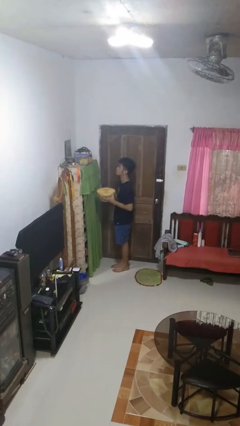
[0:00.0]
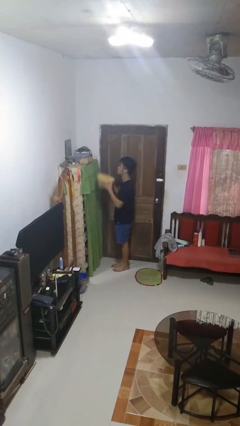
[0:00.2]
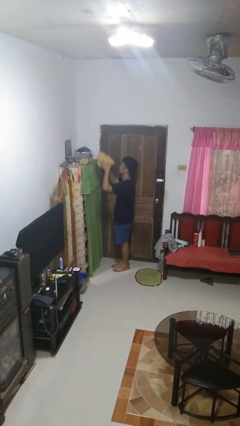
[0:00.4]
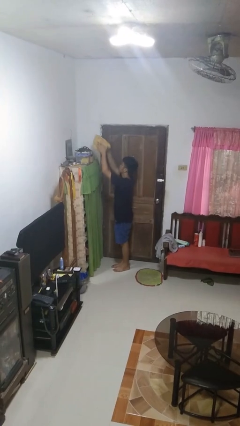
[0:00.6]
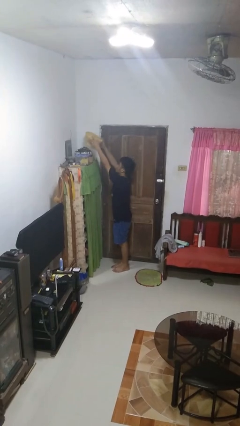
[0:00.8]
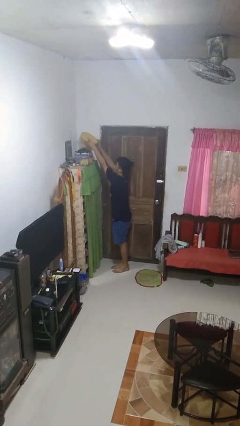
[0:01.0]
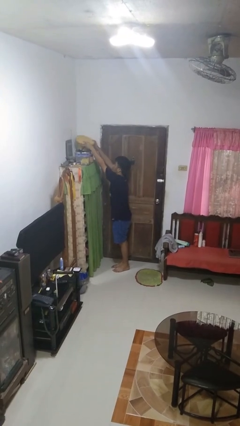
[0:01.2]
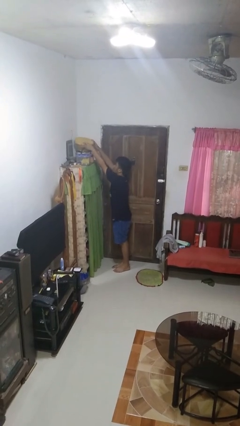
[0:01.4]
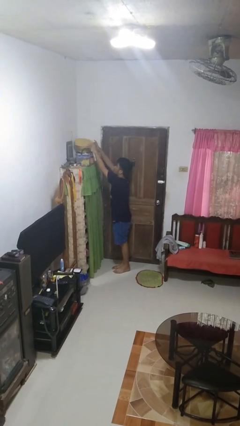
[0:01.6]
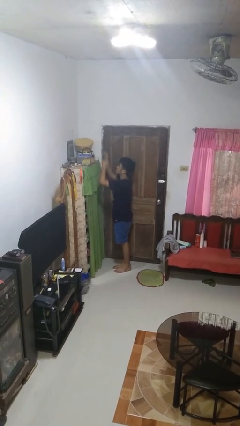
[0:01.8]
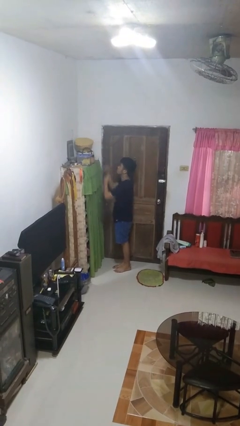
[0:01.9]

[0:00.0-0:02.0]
person puts down object on shelf

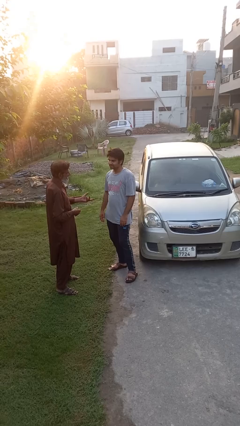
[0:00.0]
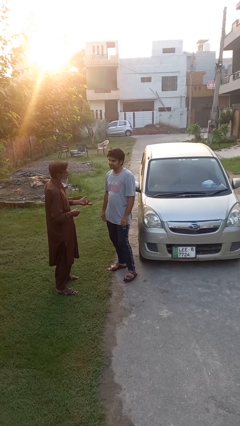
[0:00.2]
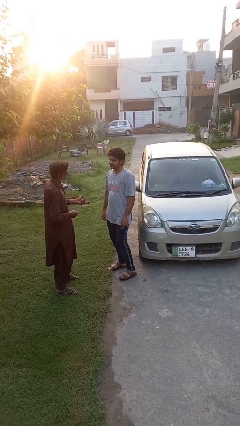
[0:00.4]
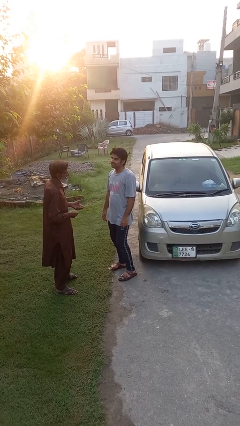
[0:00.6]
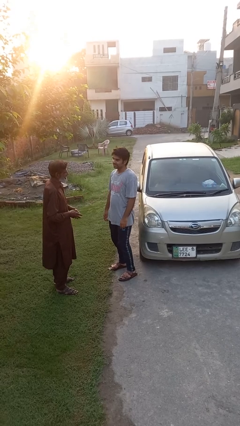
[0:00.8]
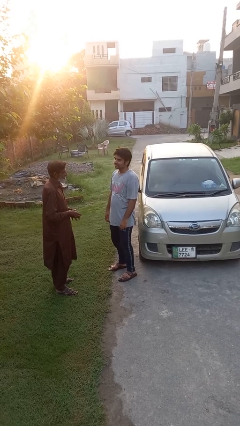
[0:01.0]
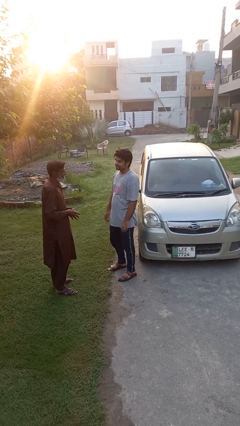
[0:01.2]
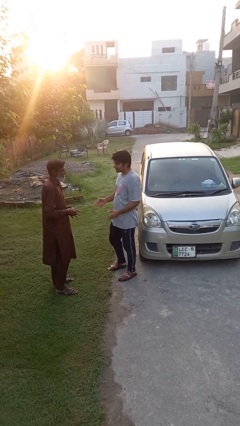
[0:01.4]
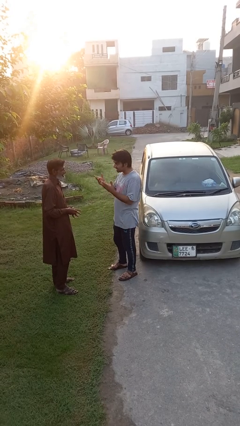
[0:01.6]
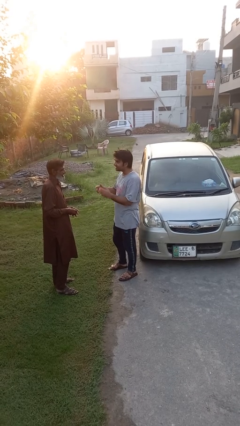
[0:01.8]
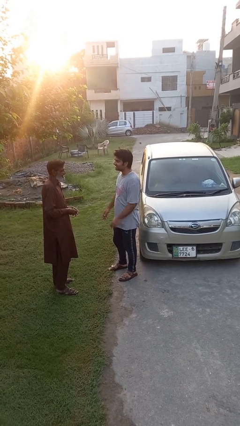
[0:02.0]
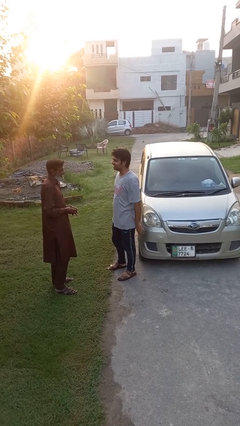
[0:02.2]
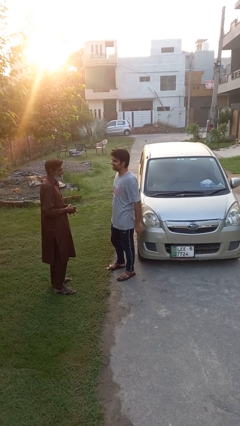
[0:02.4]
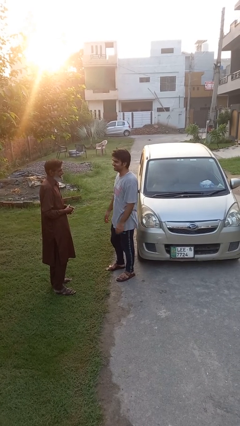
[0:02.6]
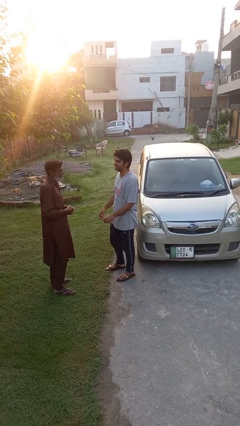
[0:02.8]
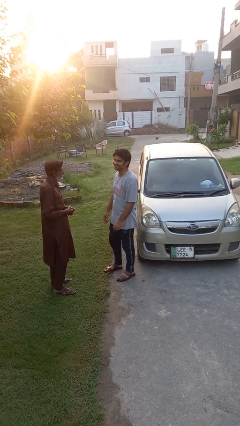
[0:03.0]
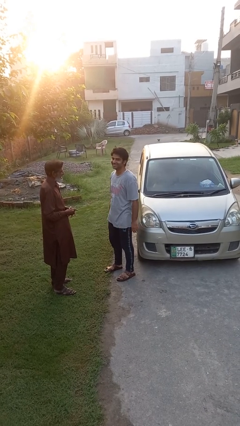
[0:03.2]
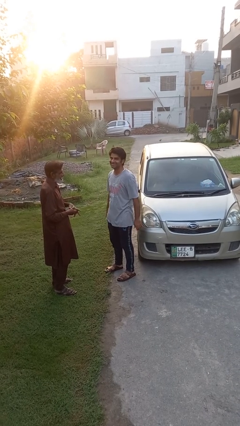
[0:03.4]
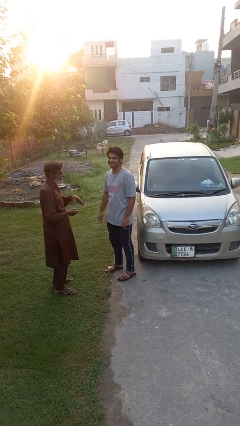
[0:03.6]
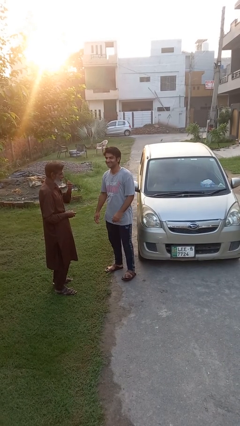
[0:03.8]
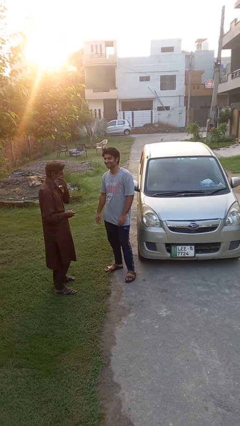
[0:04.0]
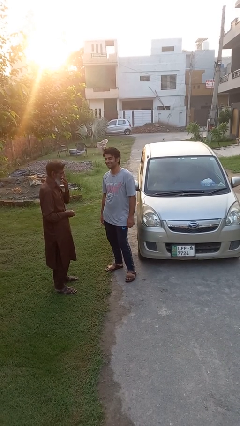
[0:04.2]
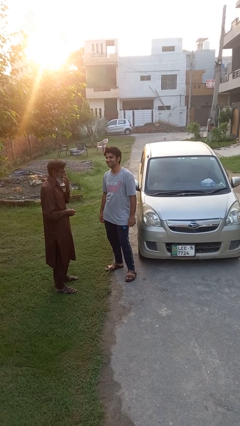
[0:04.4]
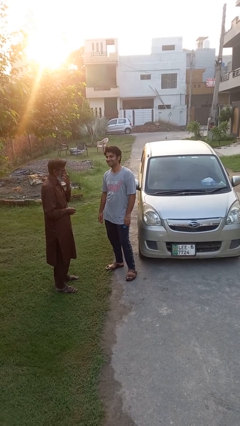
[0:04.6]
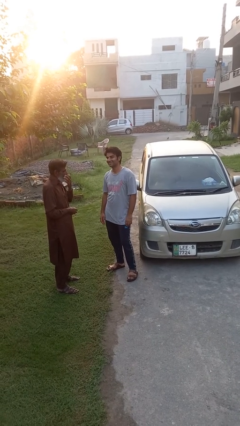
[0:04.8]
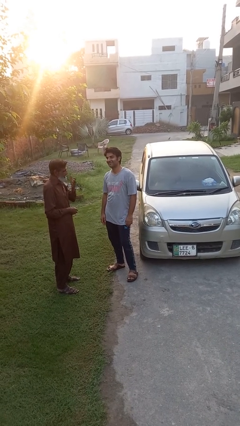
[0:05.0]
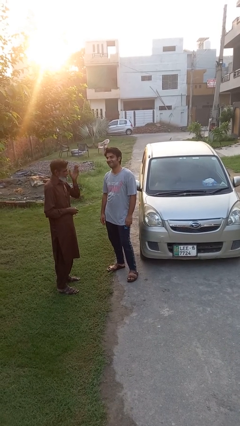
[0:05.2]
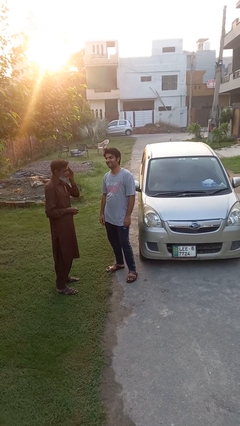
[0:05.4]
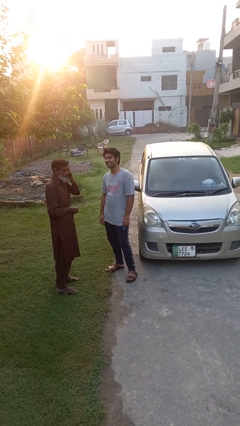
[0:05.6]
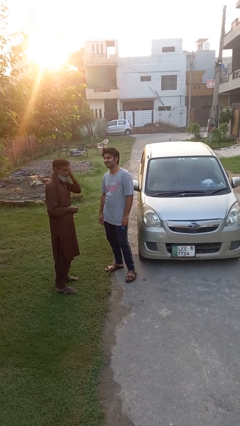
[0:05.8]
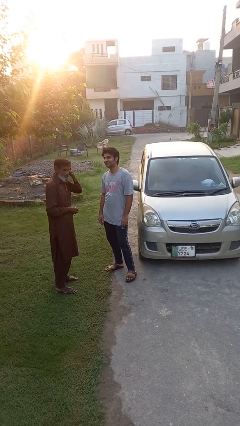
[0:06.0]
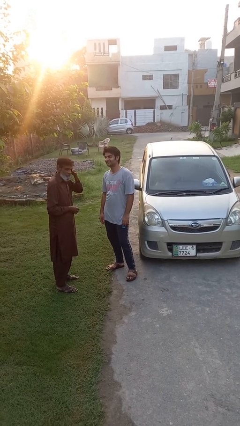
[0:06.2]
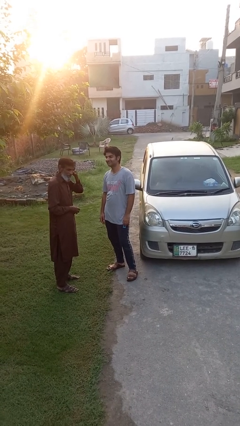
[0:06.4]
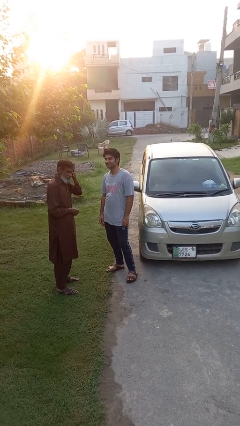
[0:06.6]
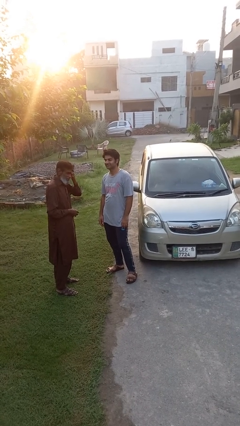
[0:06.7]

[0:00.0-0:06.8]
person laughs with person

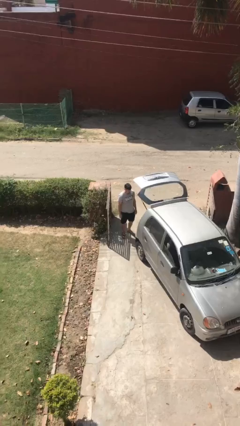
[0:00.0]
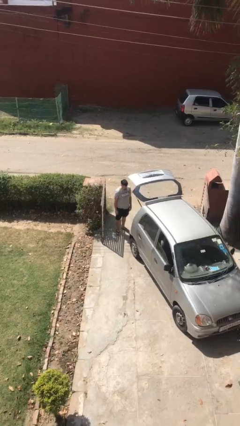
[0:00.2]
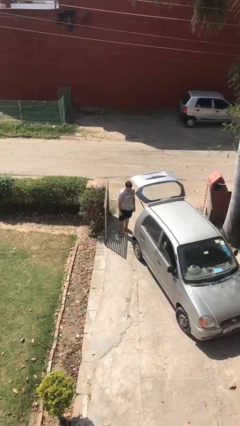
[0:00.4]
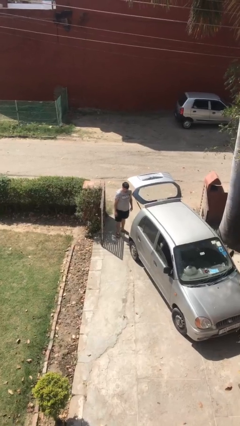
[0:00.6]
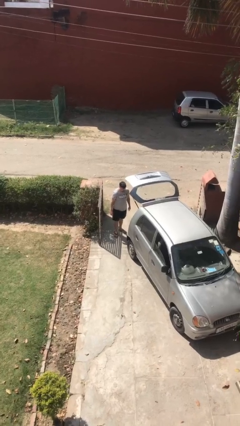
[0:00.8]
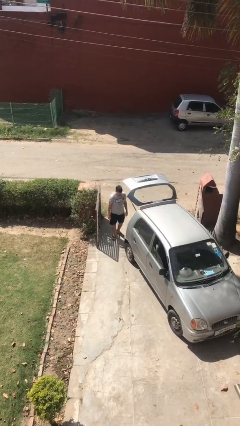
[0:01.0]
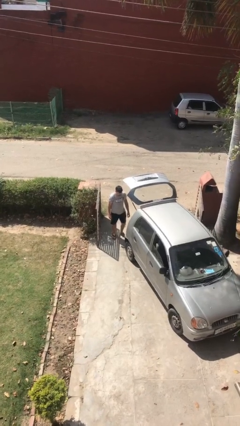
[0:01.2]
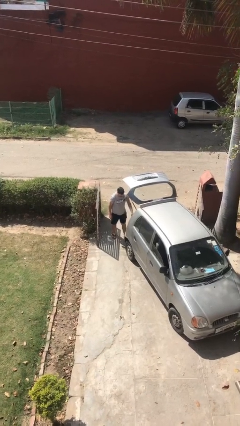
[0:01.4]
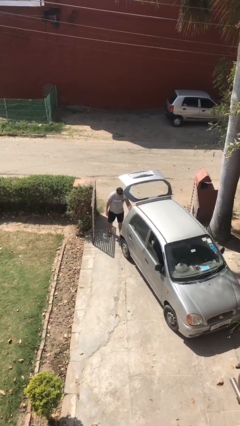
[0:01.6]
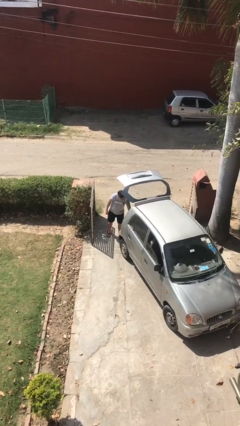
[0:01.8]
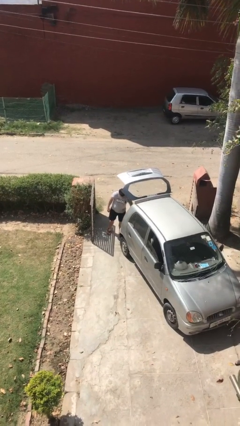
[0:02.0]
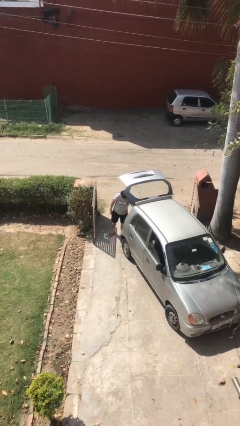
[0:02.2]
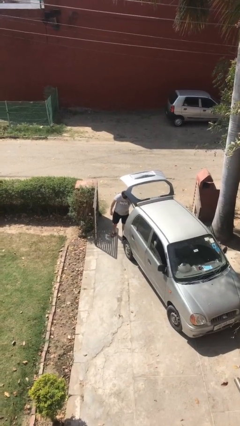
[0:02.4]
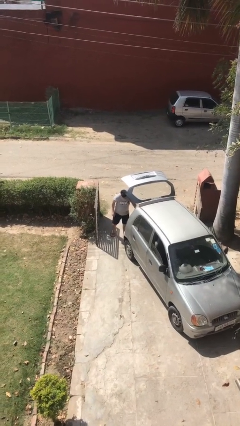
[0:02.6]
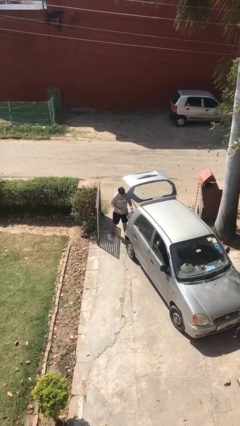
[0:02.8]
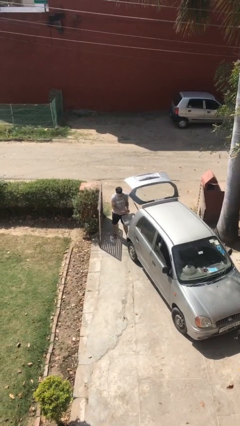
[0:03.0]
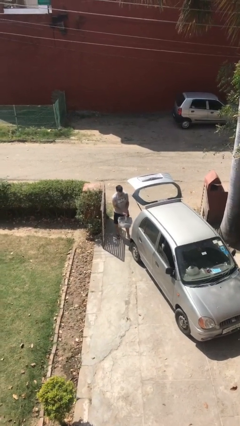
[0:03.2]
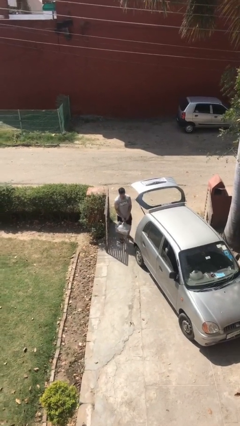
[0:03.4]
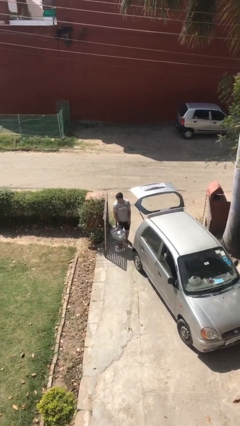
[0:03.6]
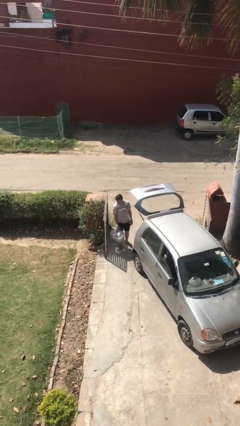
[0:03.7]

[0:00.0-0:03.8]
person unloads car

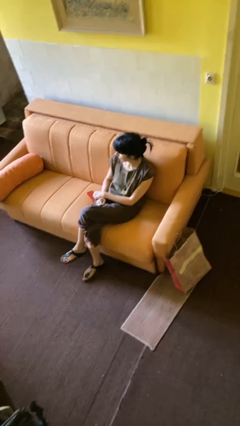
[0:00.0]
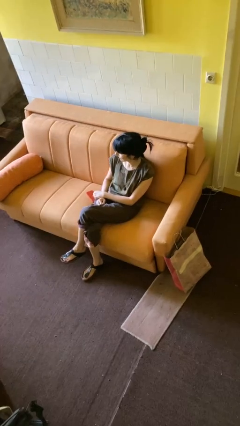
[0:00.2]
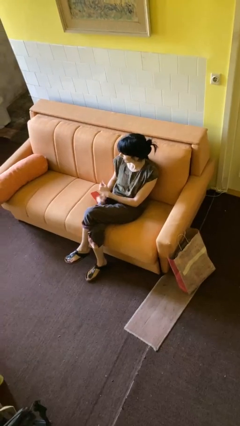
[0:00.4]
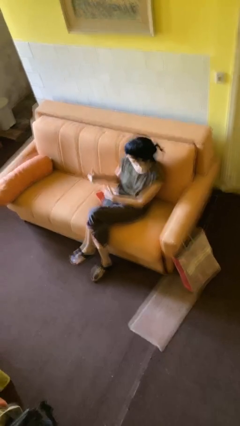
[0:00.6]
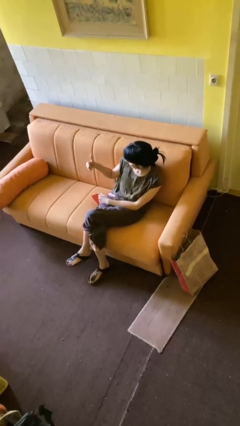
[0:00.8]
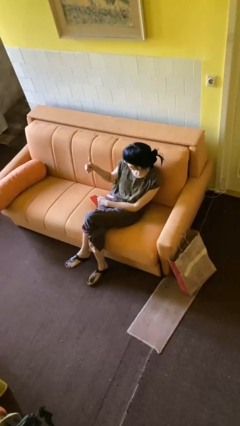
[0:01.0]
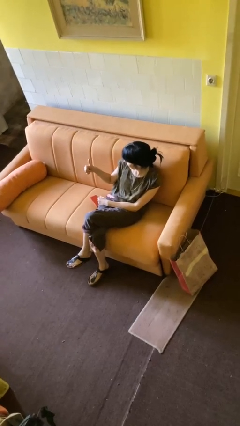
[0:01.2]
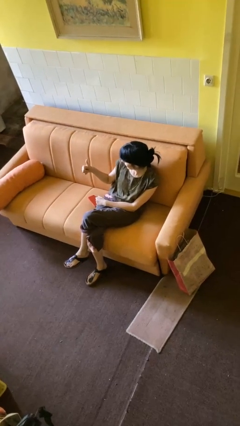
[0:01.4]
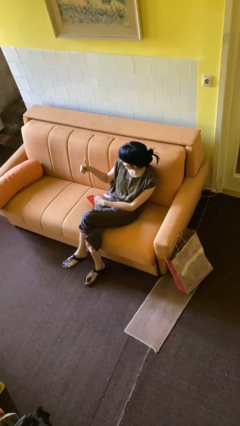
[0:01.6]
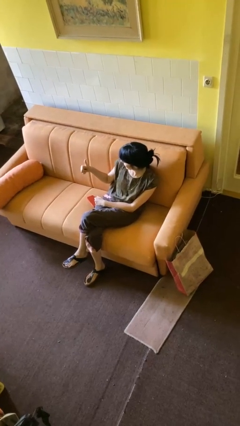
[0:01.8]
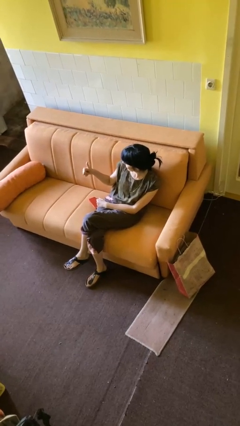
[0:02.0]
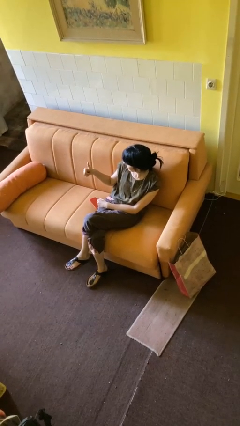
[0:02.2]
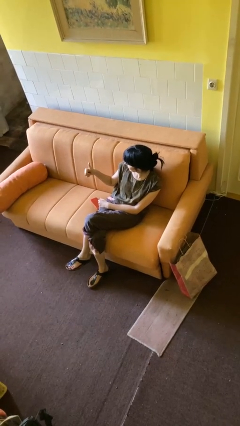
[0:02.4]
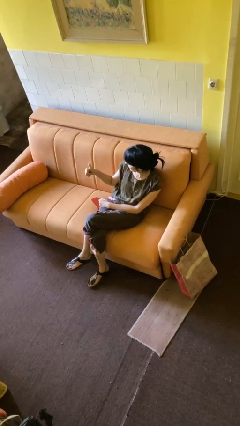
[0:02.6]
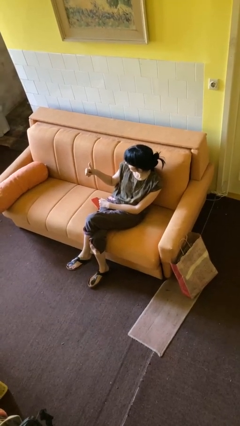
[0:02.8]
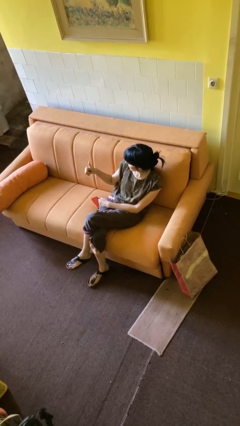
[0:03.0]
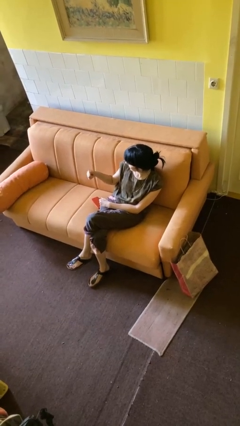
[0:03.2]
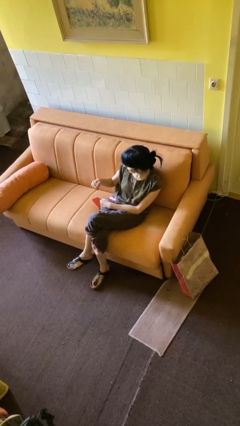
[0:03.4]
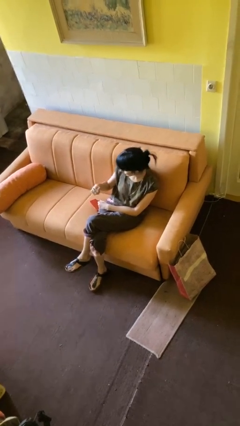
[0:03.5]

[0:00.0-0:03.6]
person gestures thumbs up

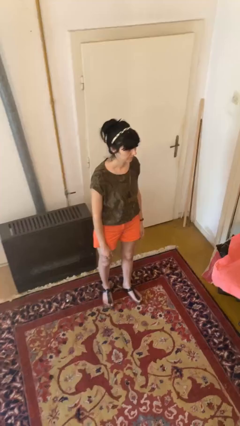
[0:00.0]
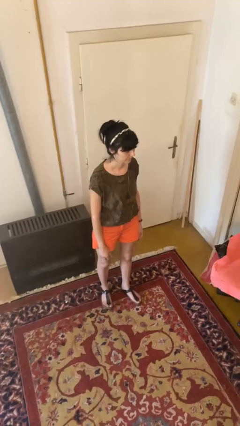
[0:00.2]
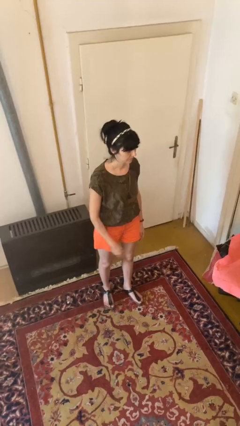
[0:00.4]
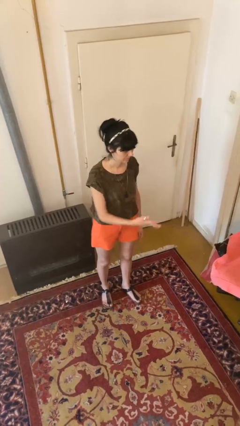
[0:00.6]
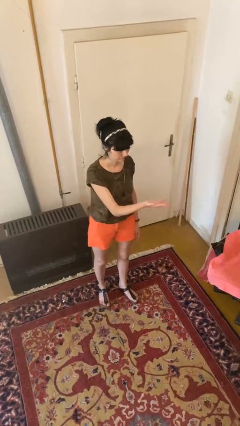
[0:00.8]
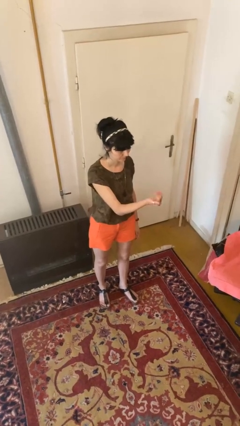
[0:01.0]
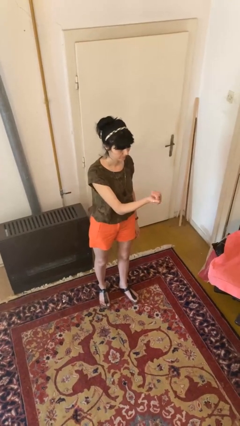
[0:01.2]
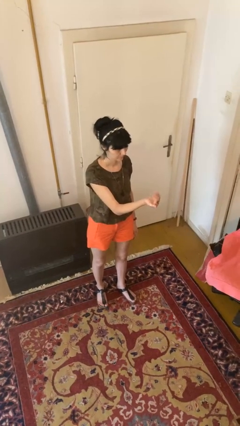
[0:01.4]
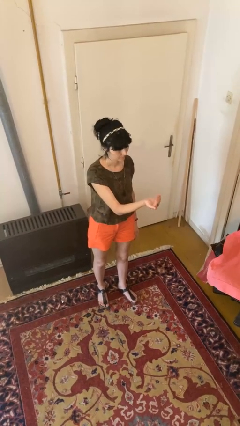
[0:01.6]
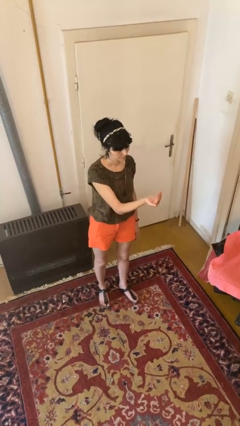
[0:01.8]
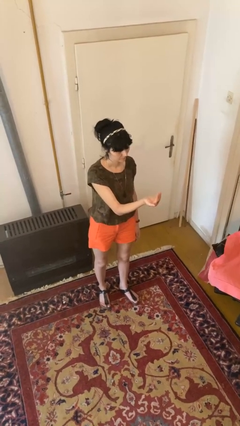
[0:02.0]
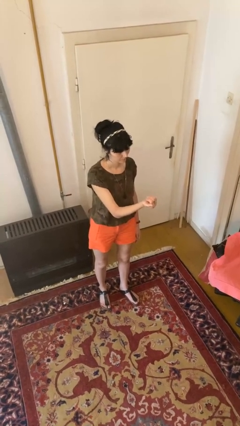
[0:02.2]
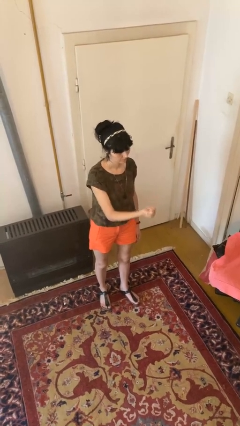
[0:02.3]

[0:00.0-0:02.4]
person gestures come here
